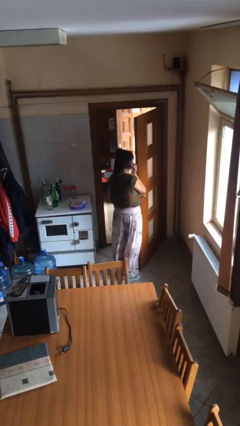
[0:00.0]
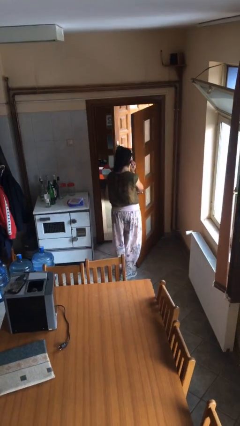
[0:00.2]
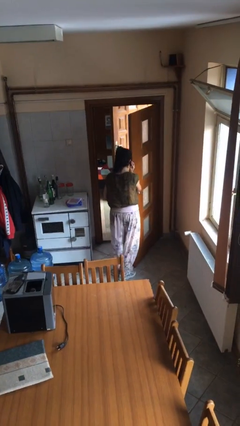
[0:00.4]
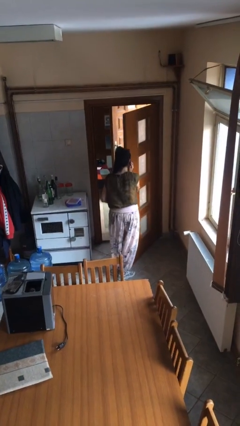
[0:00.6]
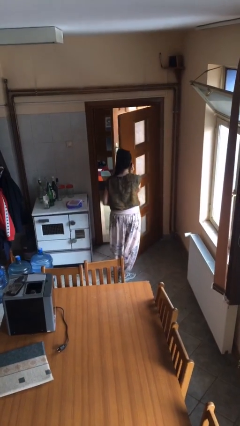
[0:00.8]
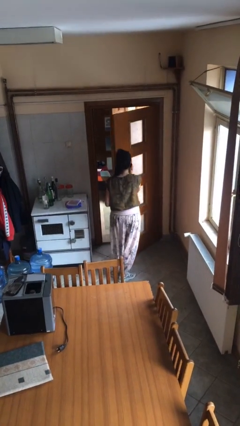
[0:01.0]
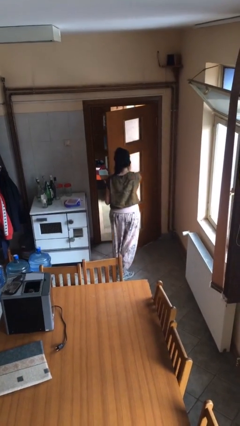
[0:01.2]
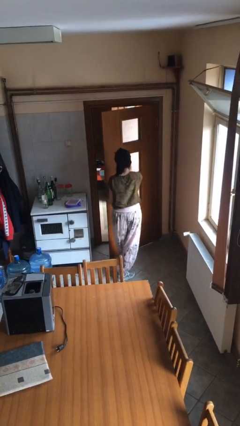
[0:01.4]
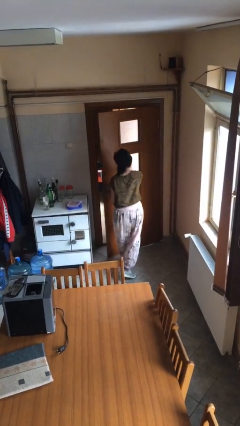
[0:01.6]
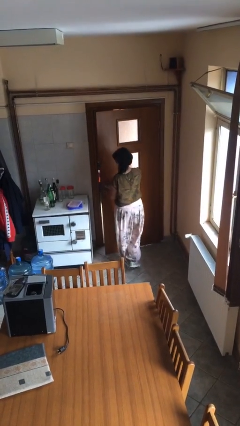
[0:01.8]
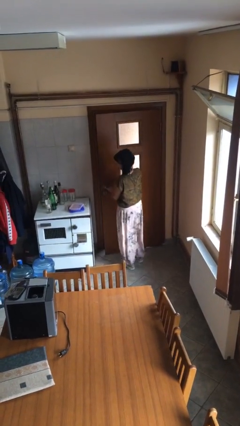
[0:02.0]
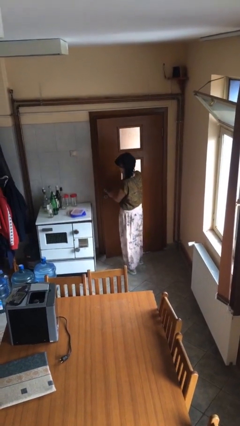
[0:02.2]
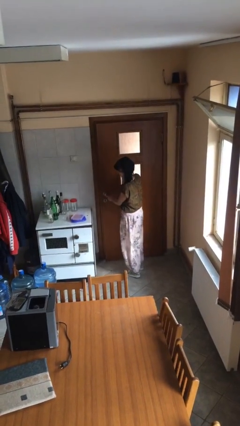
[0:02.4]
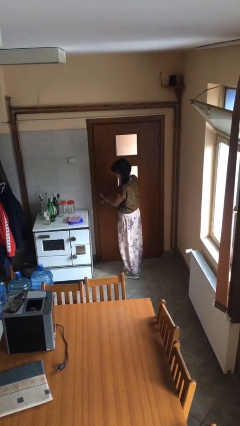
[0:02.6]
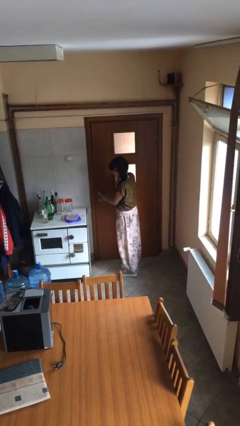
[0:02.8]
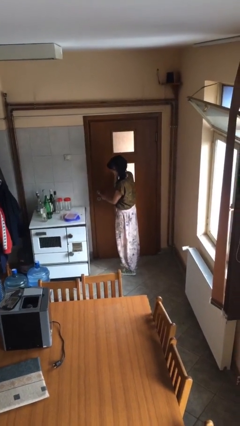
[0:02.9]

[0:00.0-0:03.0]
person closes facility door

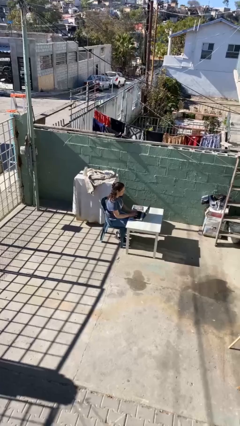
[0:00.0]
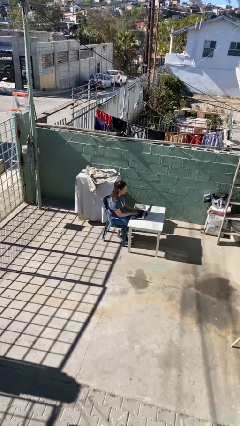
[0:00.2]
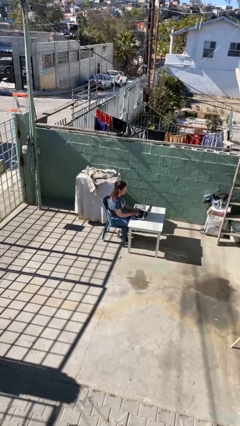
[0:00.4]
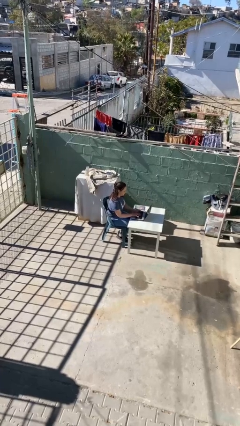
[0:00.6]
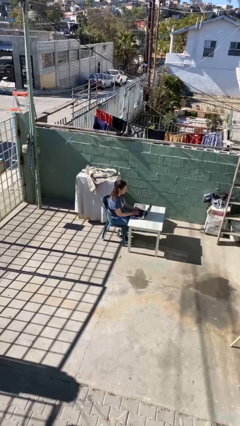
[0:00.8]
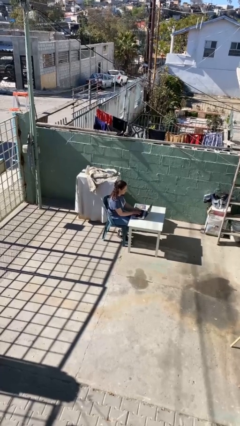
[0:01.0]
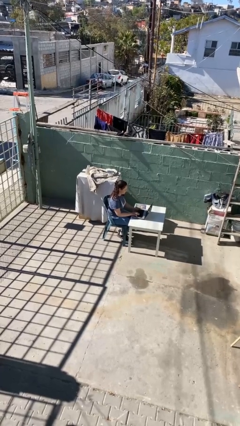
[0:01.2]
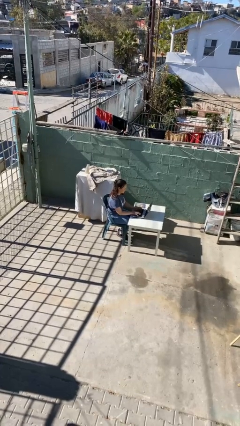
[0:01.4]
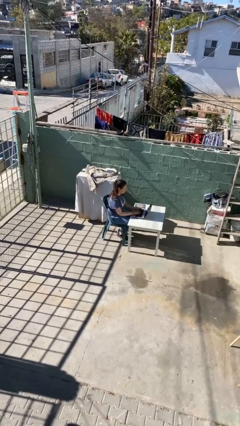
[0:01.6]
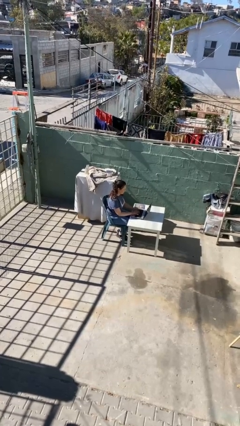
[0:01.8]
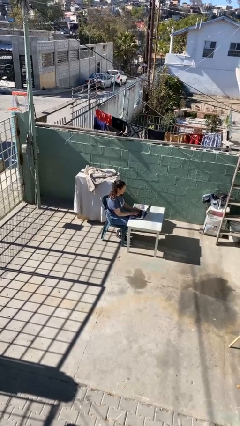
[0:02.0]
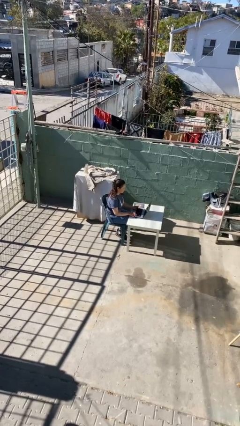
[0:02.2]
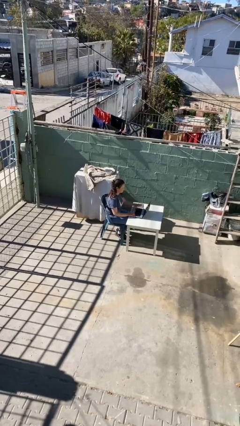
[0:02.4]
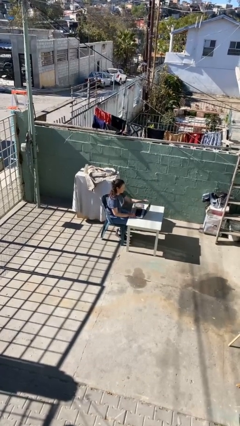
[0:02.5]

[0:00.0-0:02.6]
person interacts with laptop

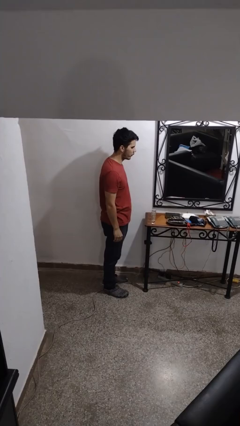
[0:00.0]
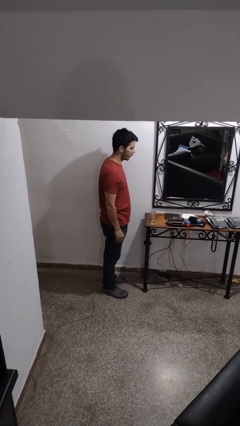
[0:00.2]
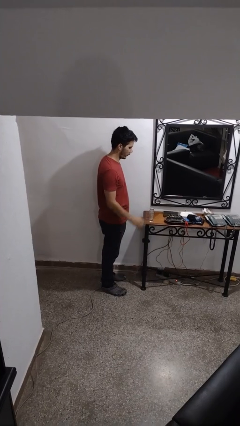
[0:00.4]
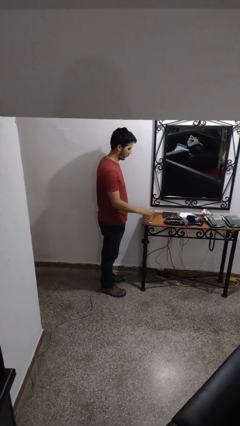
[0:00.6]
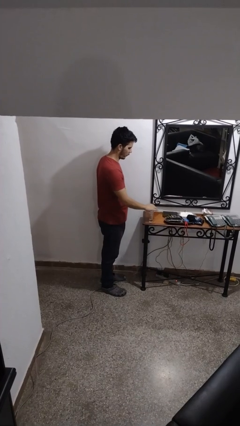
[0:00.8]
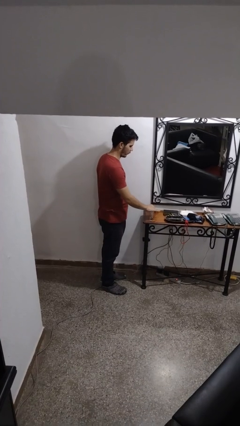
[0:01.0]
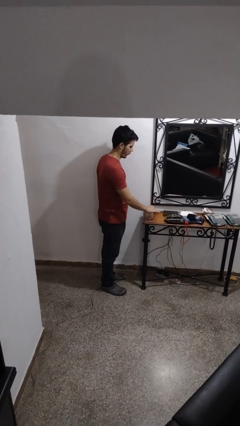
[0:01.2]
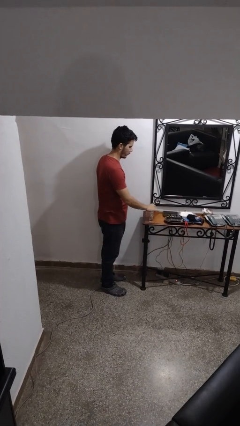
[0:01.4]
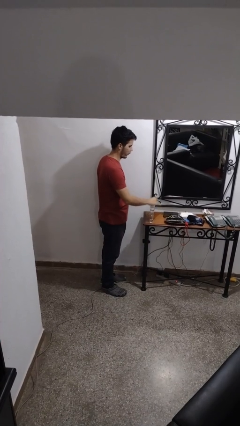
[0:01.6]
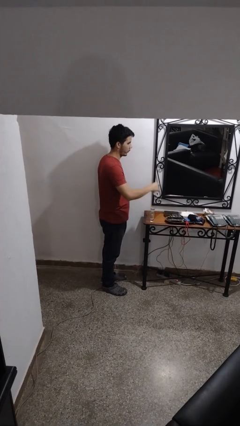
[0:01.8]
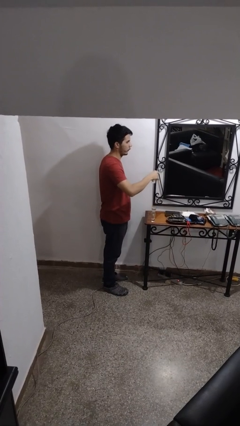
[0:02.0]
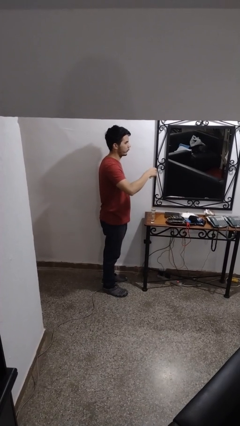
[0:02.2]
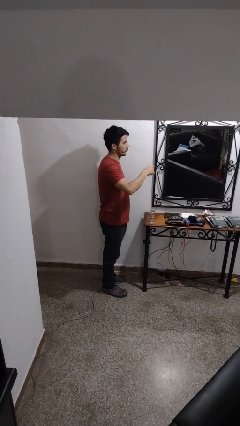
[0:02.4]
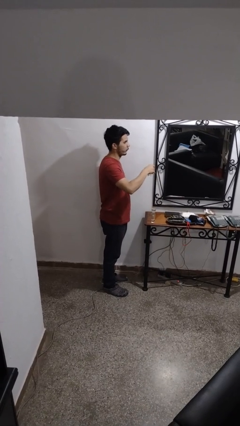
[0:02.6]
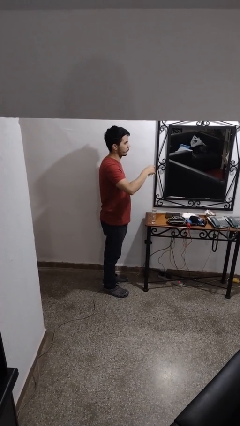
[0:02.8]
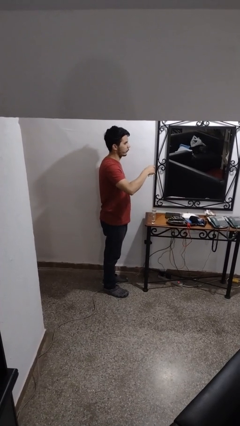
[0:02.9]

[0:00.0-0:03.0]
person picks up object from table

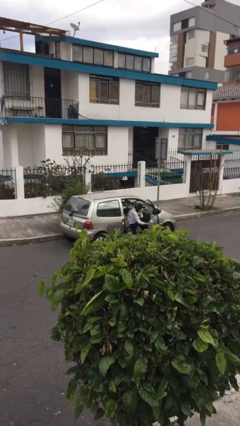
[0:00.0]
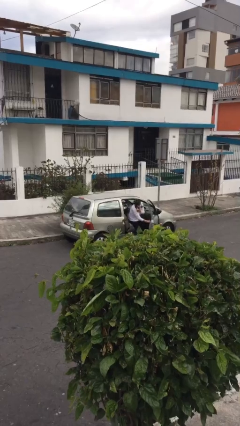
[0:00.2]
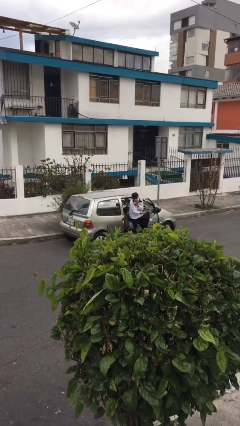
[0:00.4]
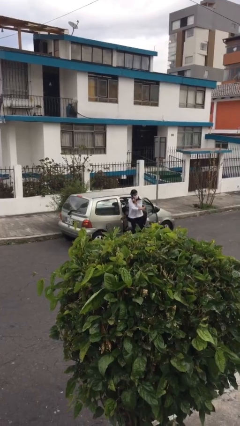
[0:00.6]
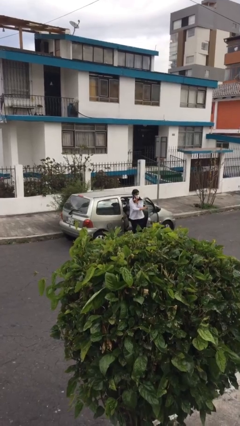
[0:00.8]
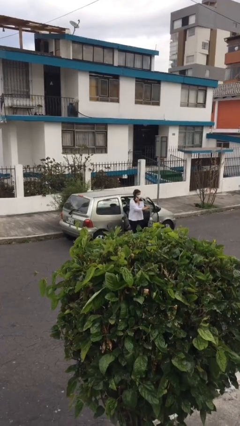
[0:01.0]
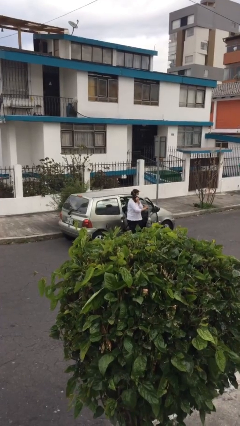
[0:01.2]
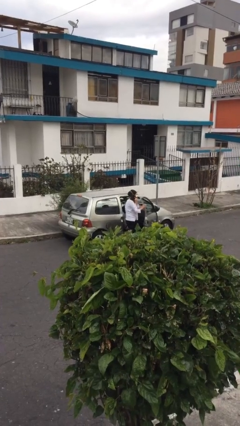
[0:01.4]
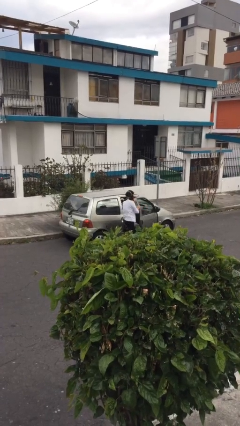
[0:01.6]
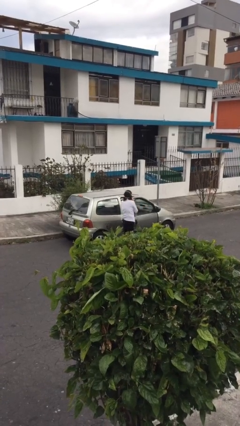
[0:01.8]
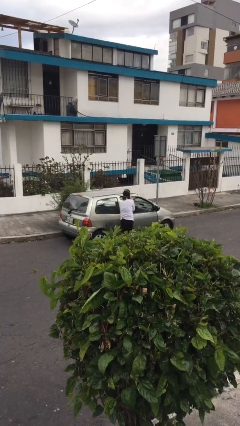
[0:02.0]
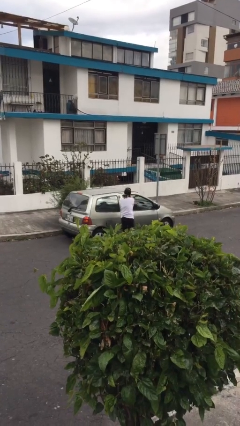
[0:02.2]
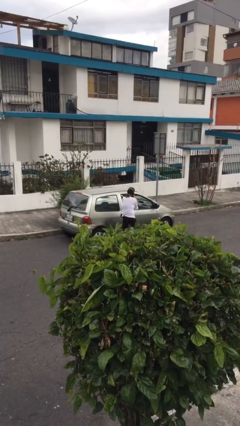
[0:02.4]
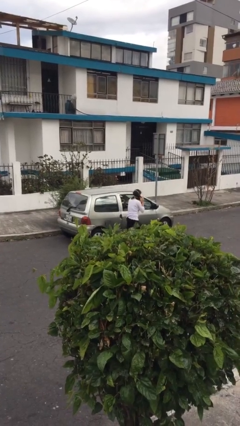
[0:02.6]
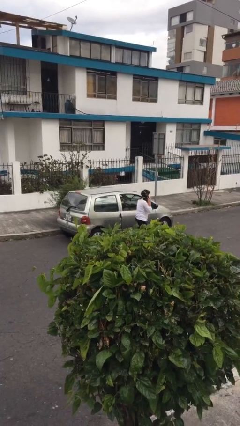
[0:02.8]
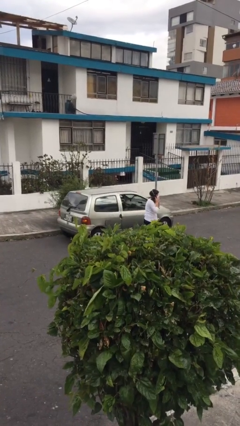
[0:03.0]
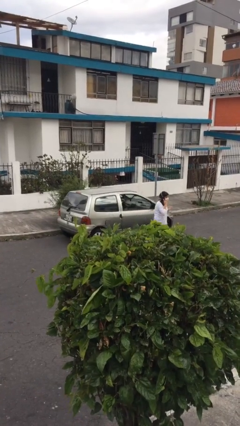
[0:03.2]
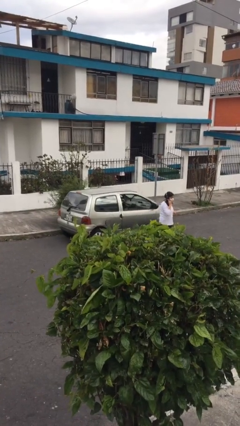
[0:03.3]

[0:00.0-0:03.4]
car drops off person

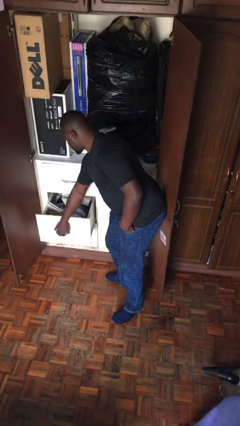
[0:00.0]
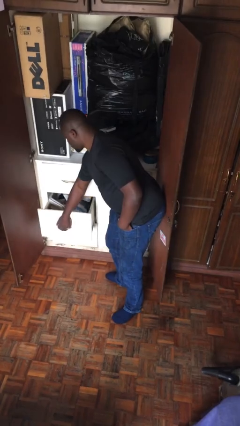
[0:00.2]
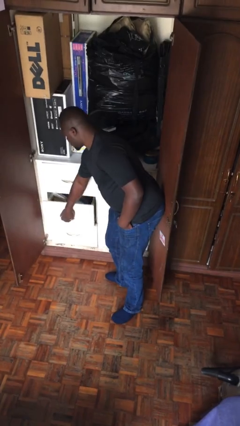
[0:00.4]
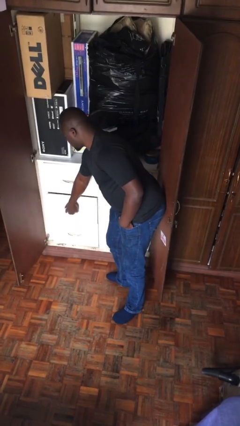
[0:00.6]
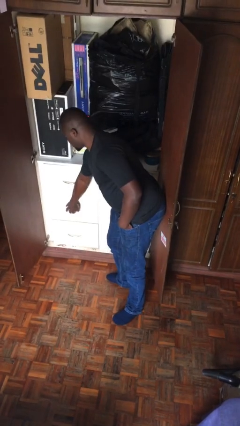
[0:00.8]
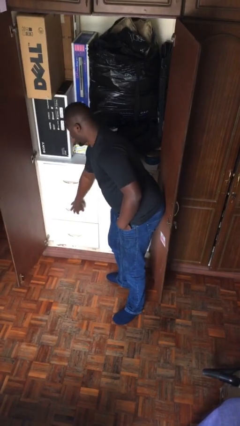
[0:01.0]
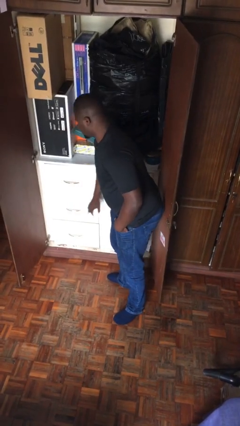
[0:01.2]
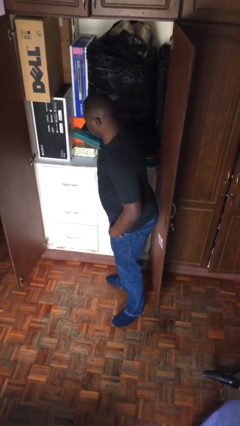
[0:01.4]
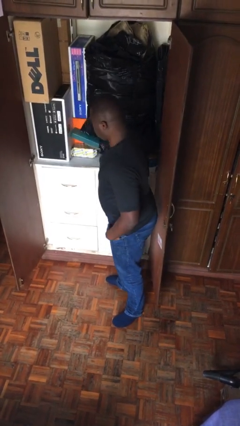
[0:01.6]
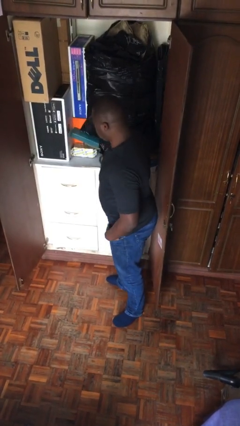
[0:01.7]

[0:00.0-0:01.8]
person closes dresser drawer

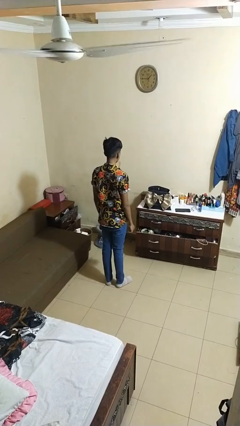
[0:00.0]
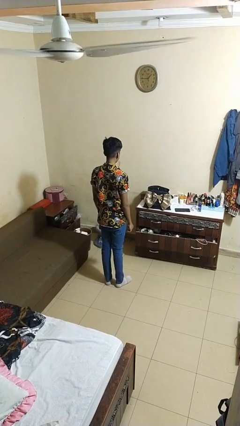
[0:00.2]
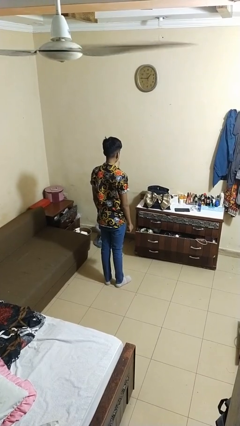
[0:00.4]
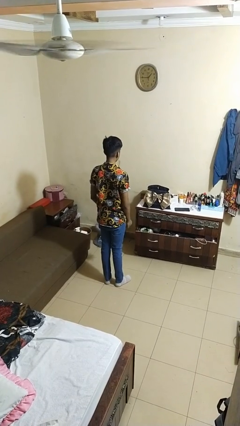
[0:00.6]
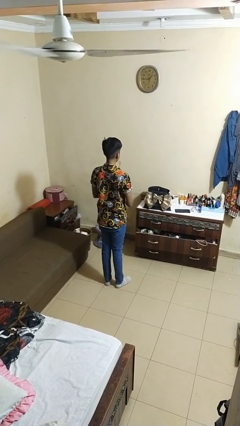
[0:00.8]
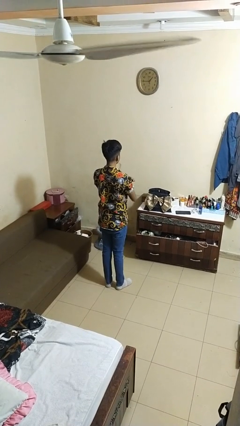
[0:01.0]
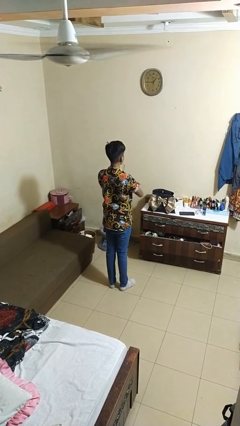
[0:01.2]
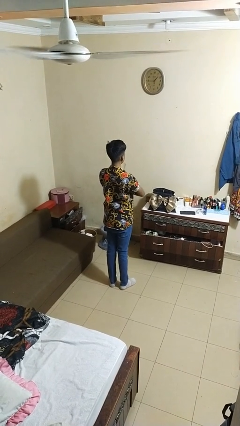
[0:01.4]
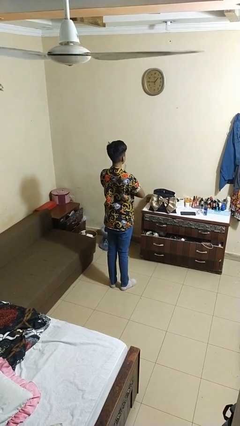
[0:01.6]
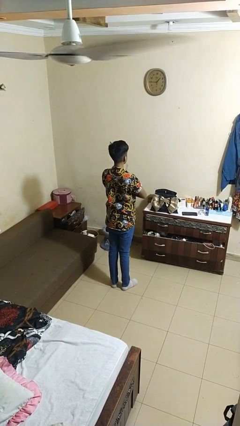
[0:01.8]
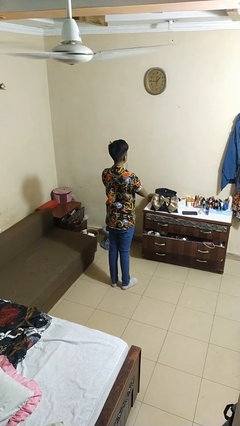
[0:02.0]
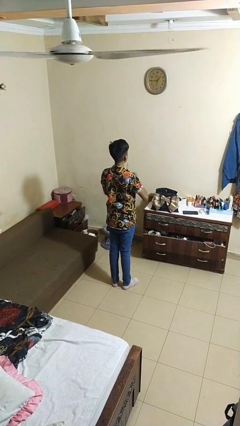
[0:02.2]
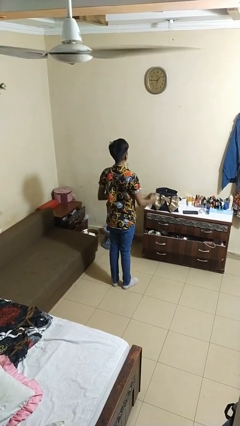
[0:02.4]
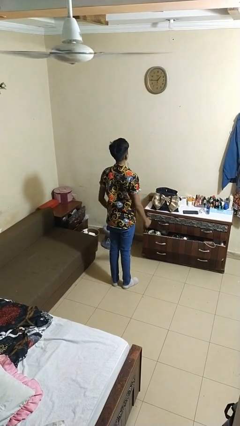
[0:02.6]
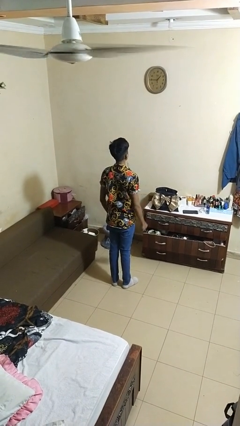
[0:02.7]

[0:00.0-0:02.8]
person crosses arms

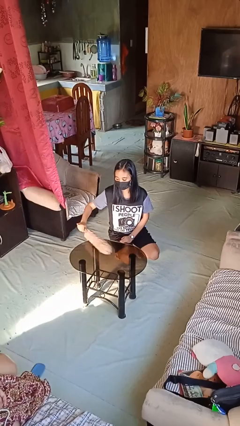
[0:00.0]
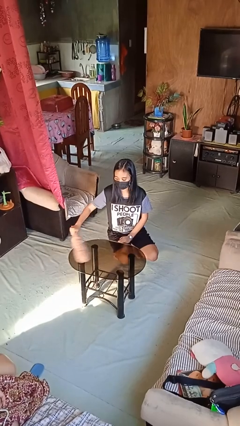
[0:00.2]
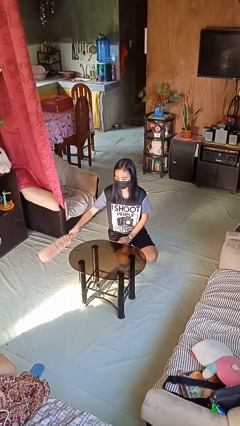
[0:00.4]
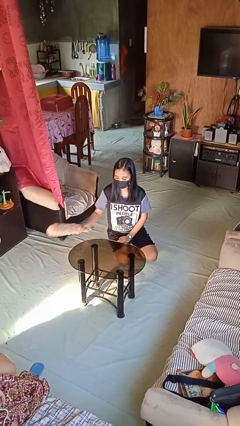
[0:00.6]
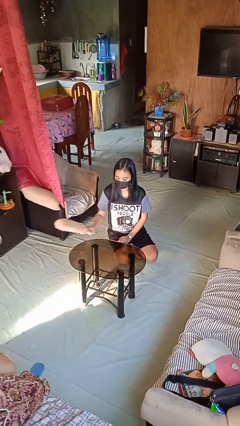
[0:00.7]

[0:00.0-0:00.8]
person dusts furniture
